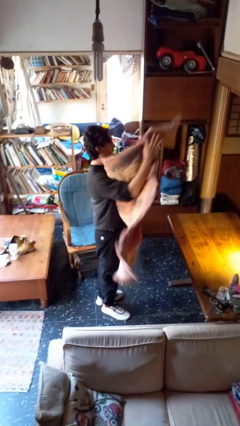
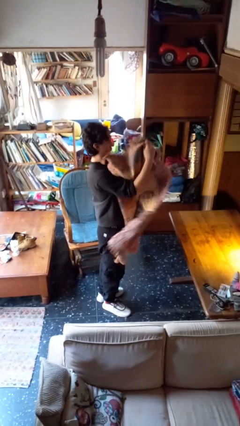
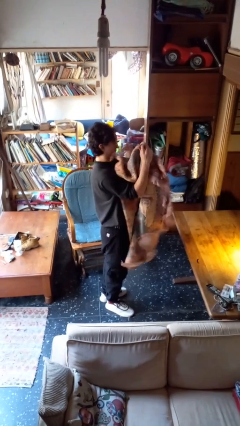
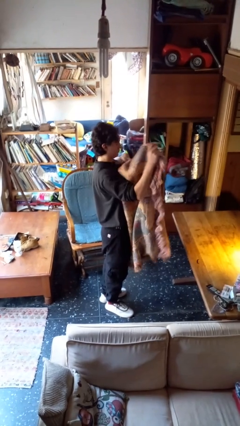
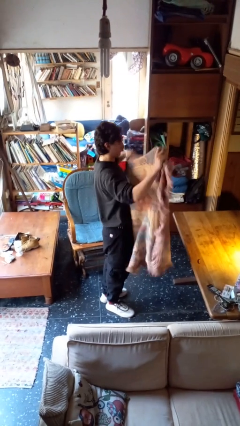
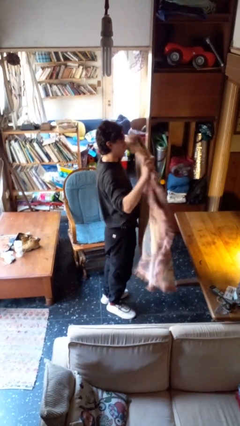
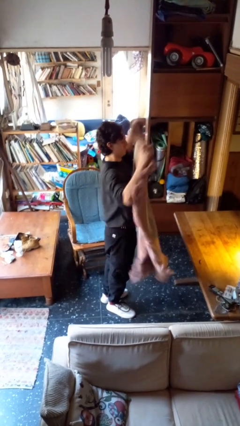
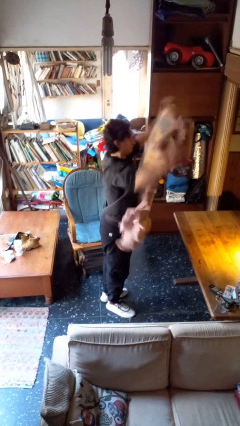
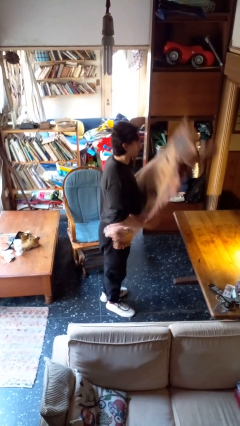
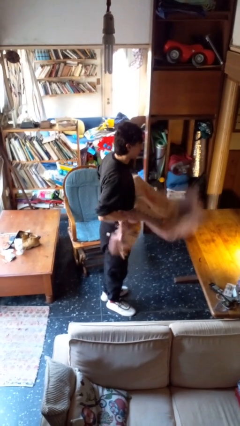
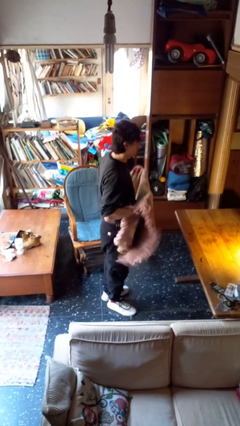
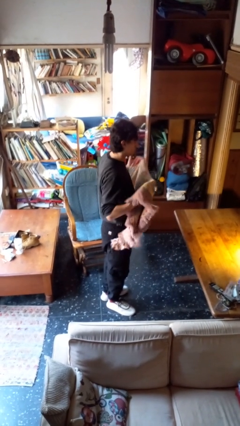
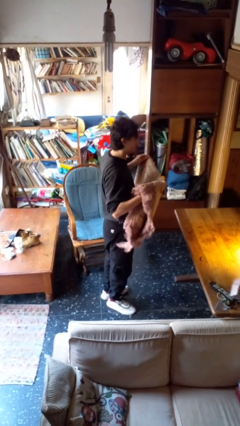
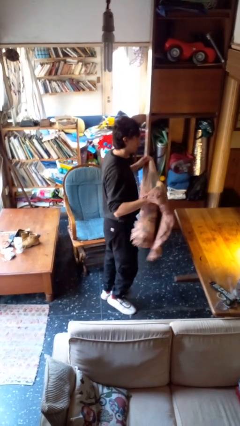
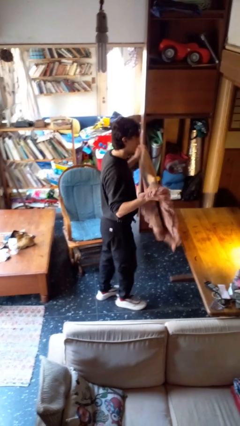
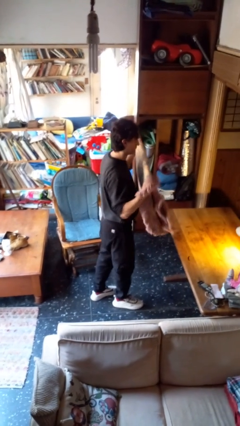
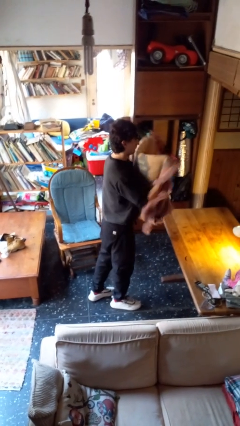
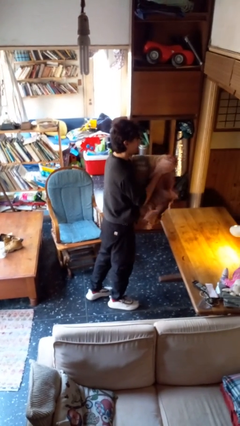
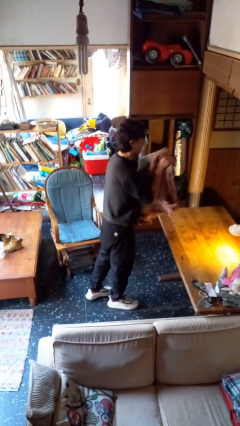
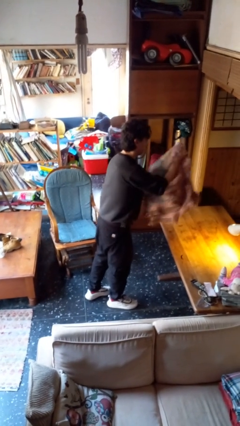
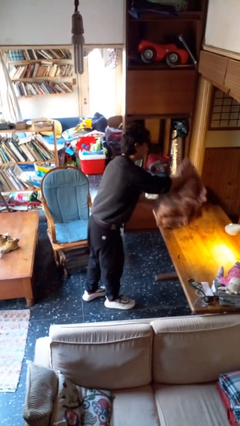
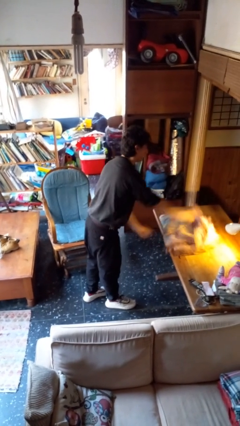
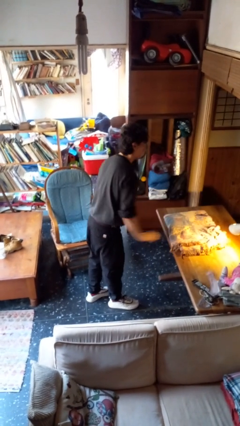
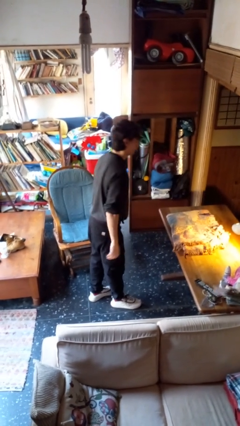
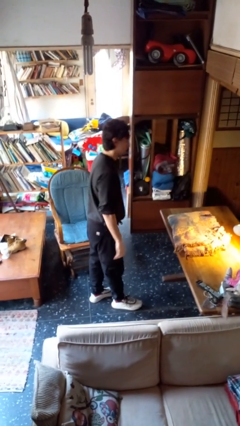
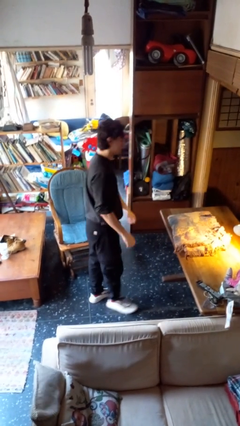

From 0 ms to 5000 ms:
person folds blanket

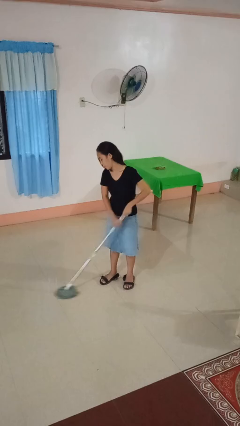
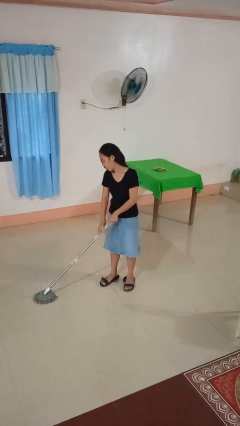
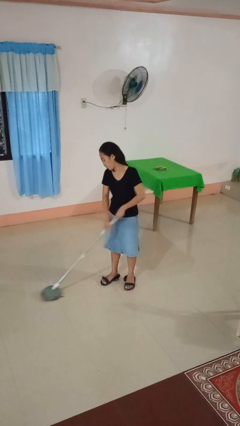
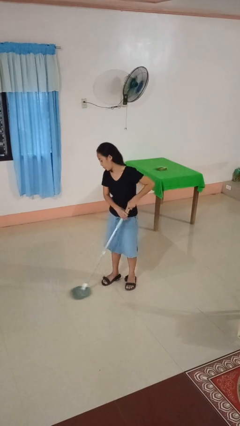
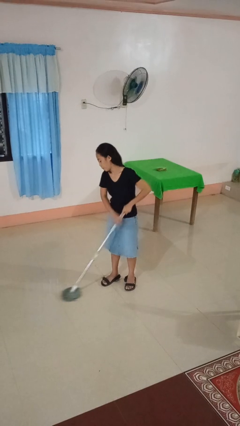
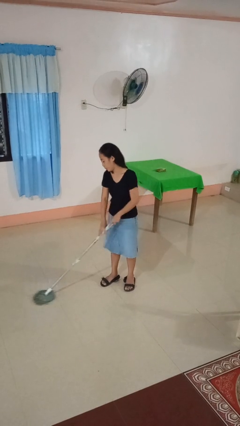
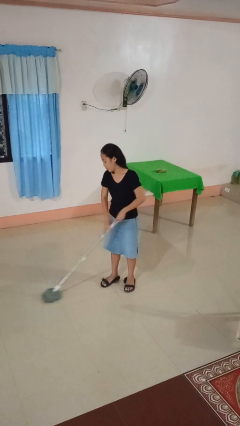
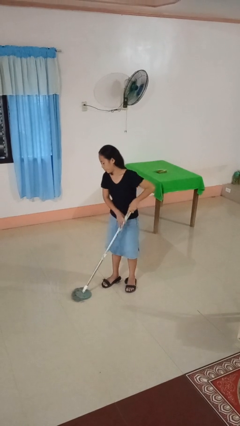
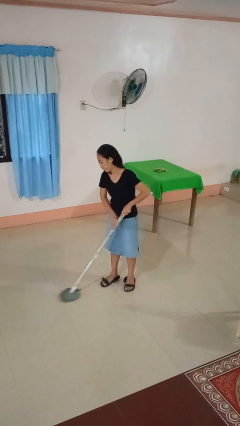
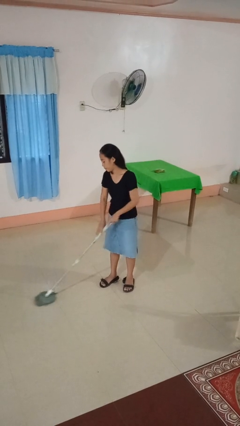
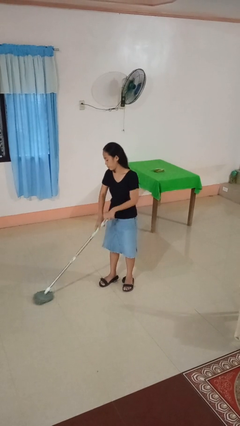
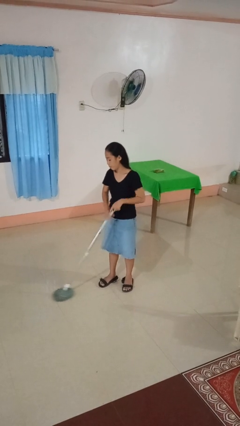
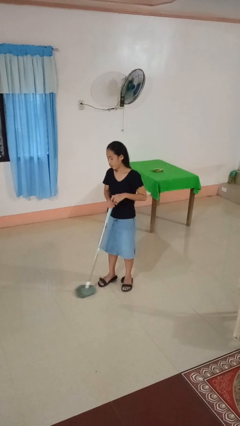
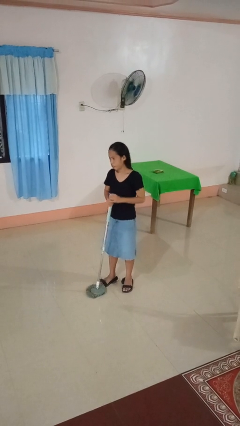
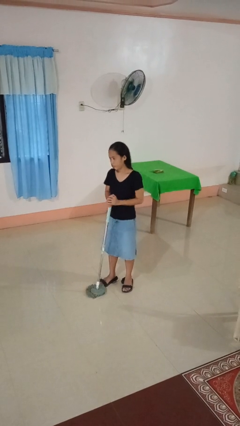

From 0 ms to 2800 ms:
person mops

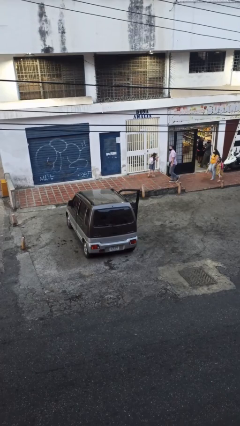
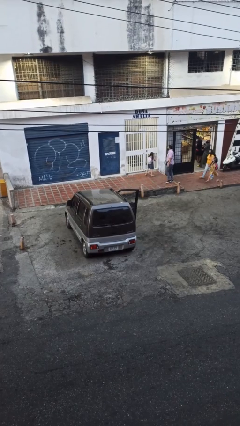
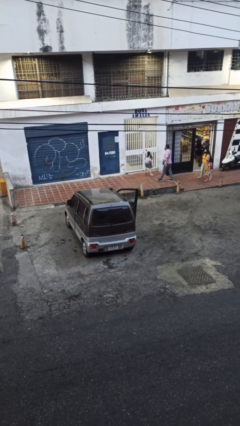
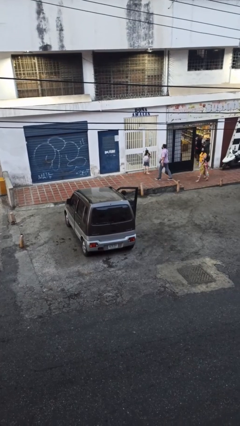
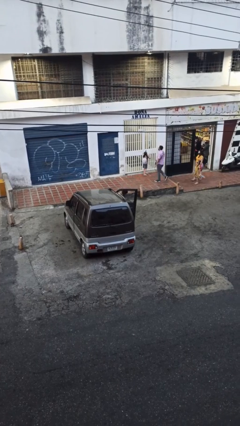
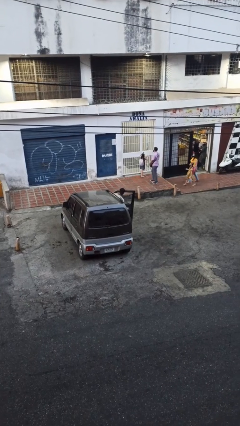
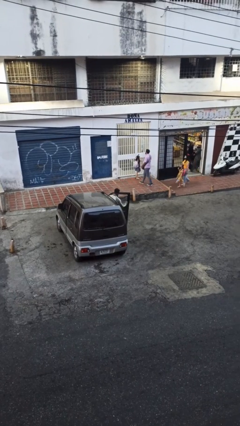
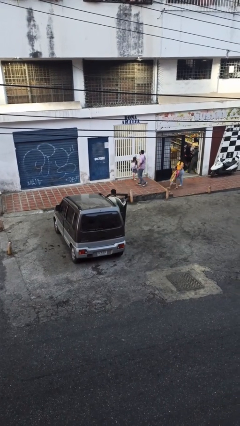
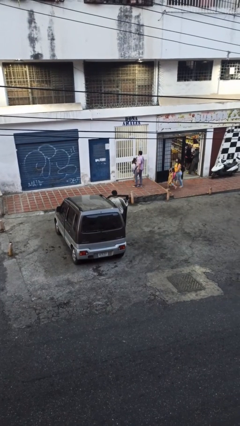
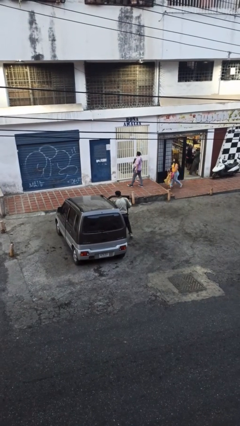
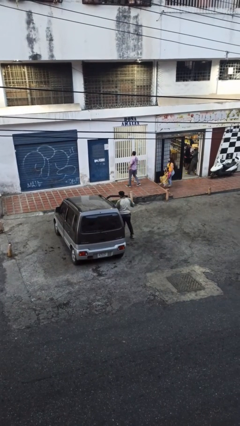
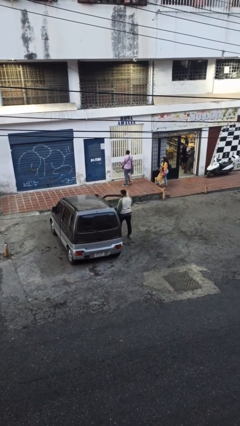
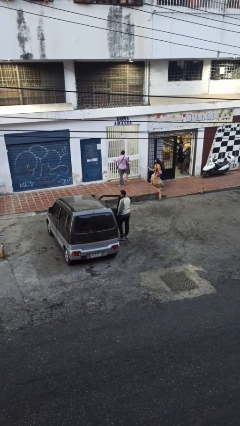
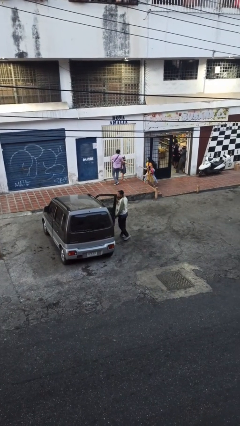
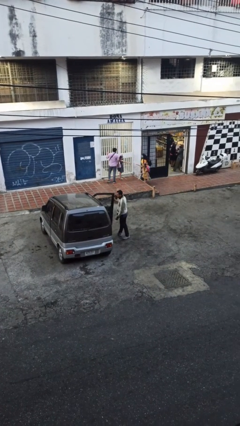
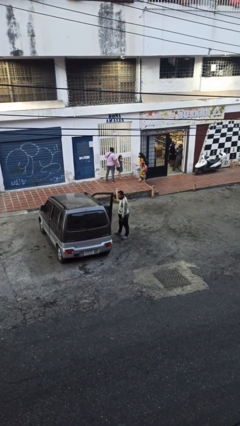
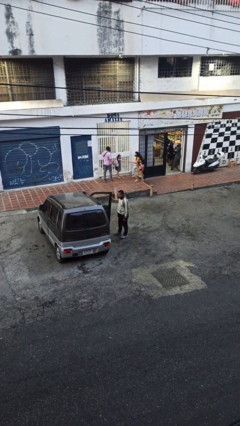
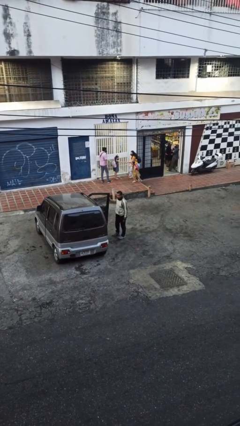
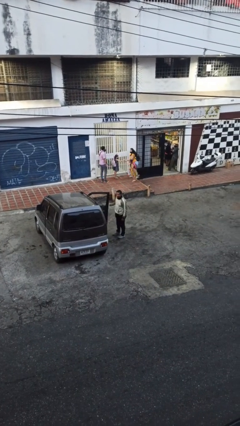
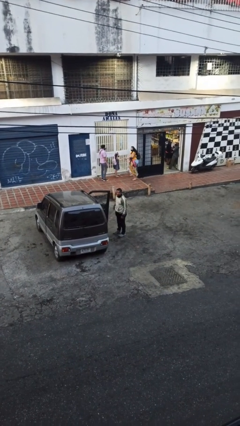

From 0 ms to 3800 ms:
person exits car

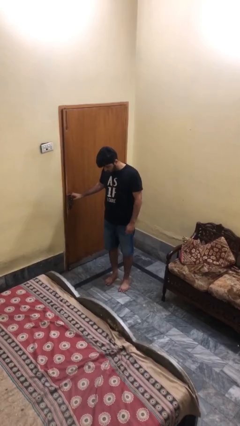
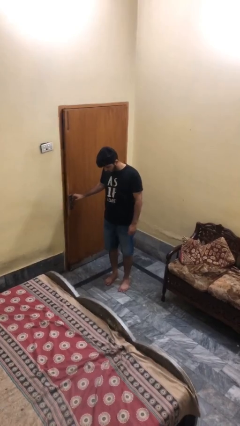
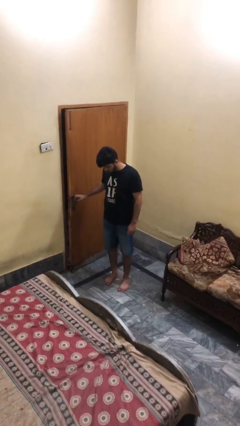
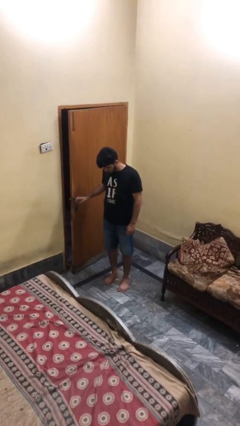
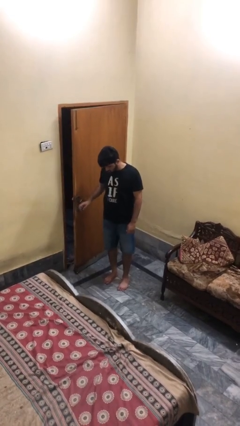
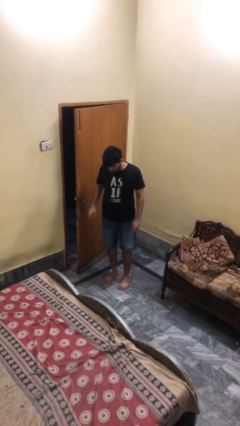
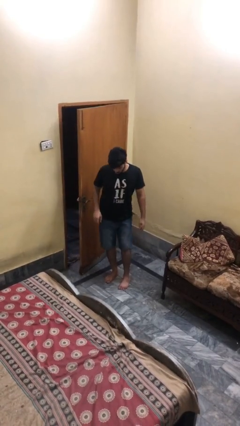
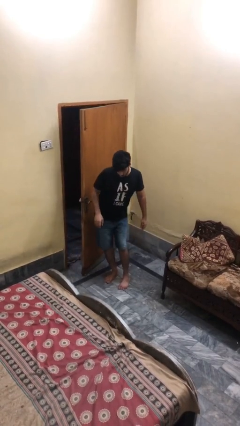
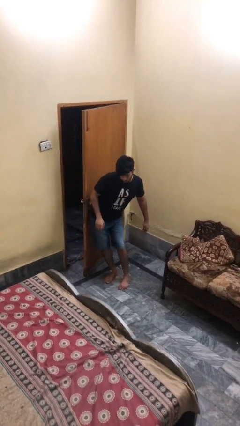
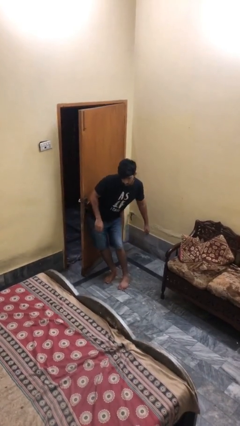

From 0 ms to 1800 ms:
person opens facility door

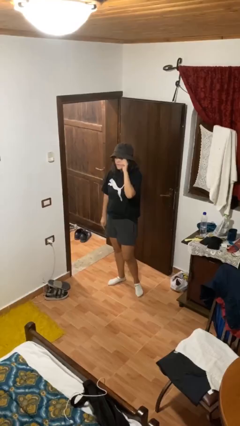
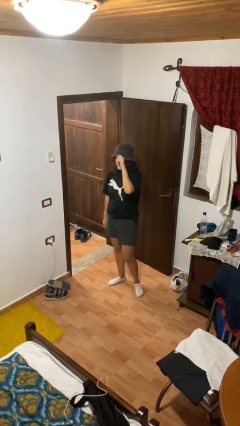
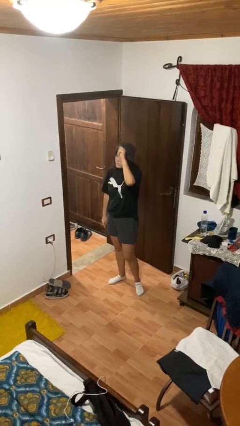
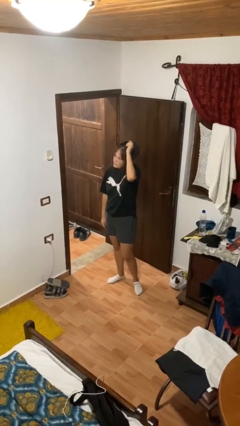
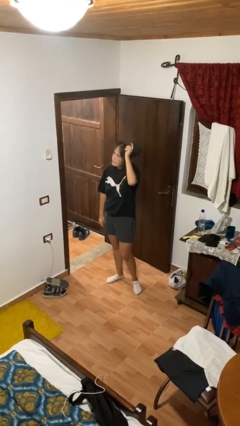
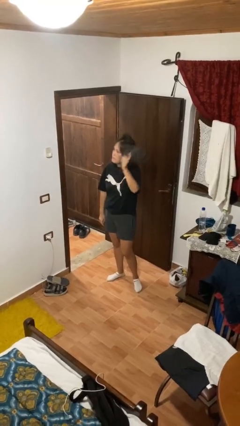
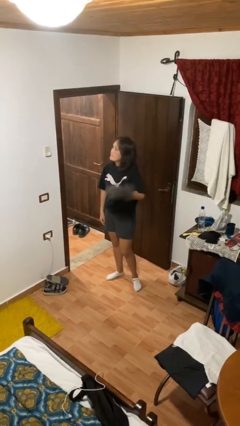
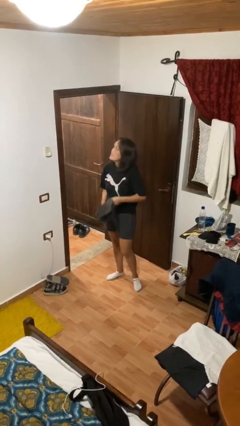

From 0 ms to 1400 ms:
person takes off hat

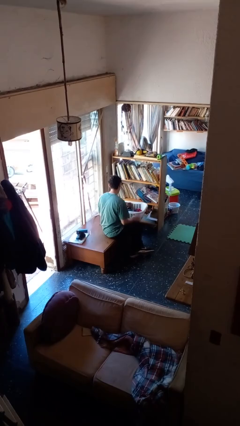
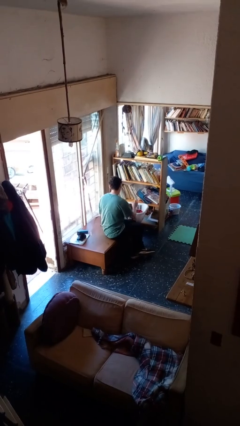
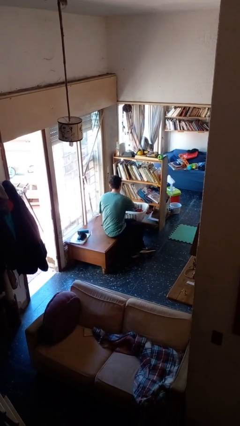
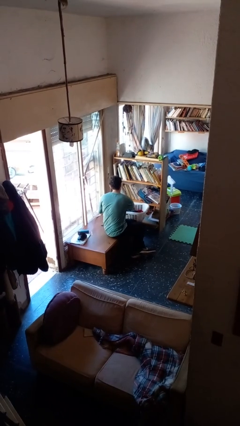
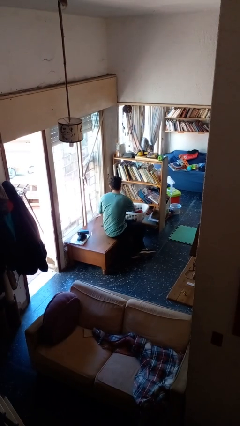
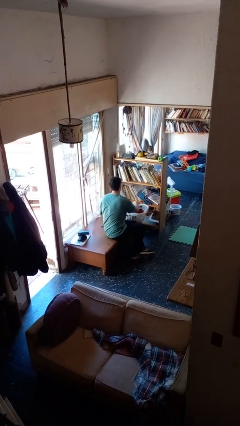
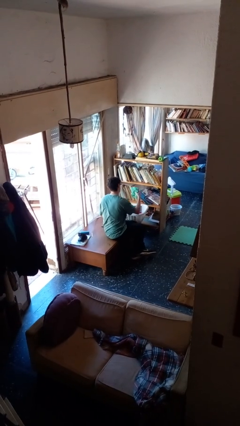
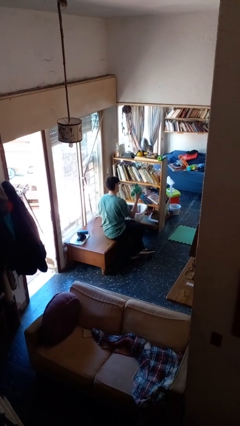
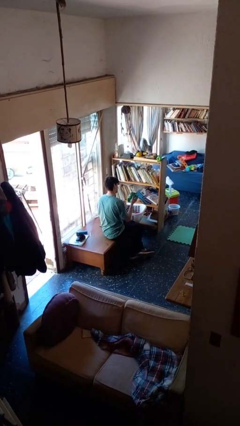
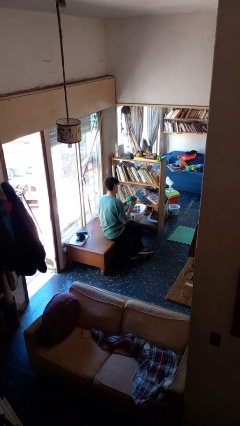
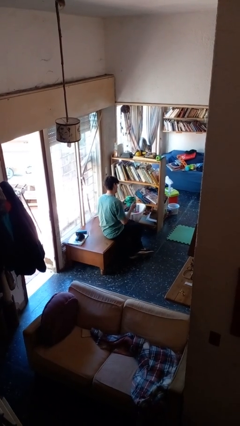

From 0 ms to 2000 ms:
person takes object from basket

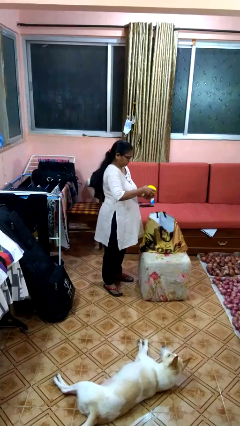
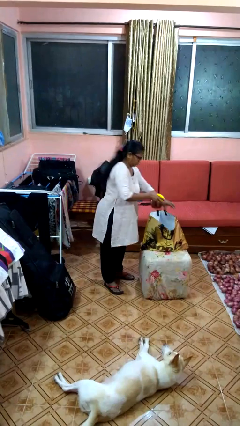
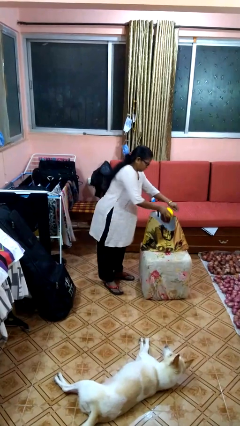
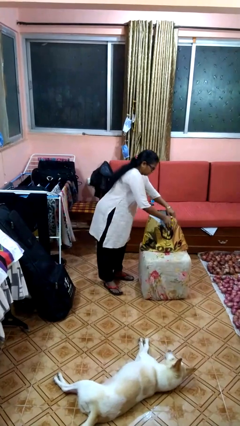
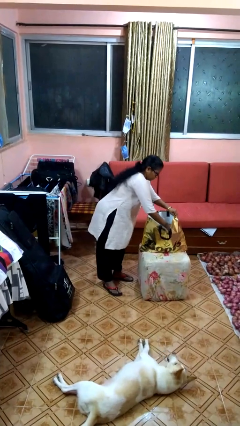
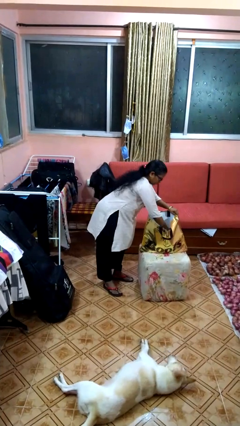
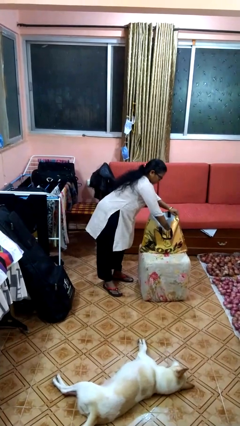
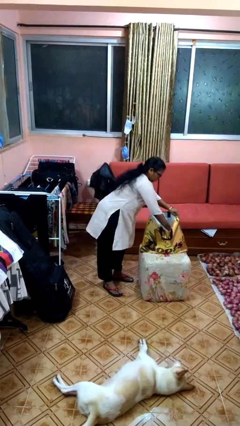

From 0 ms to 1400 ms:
person puts object into bag
